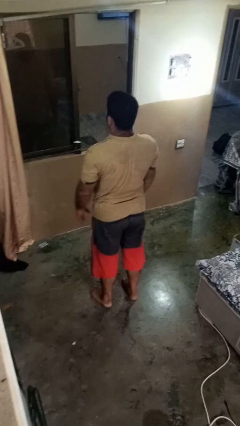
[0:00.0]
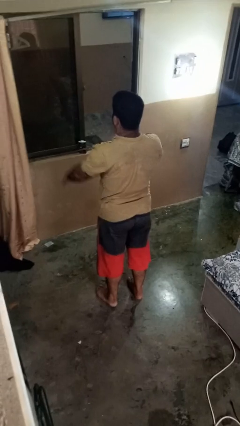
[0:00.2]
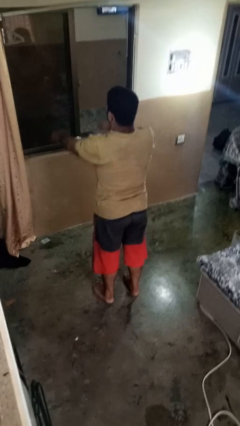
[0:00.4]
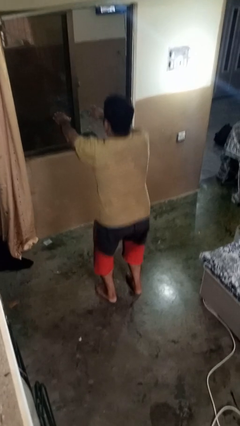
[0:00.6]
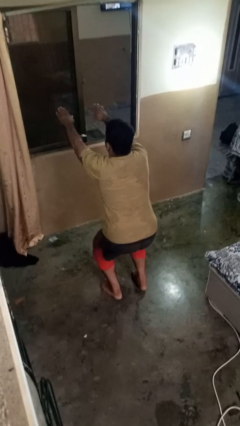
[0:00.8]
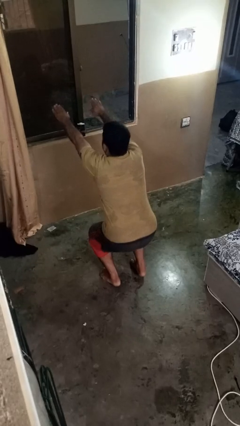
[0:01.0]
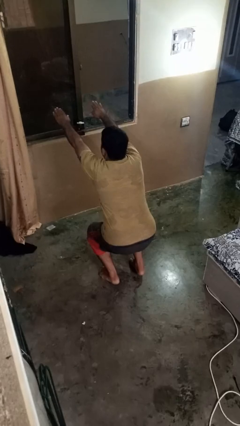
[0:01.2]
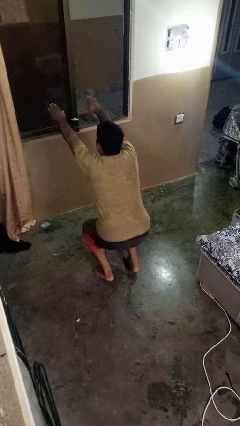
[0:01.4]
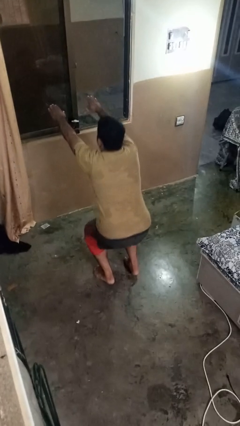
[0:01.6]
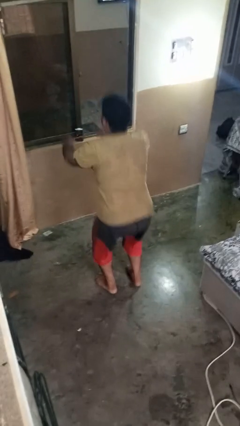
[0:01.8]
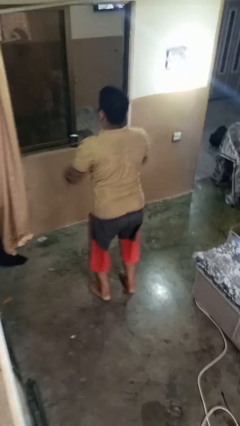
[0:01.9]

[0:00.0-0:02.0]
person squats

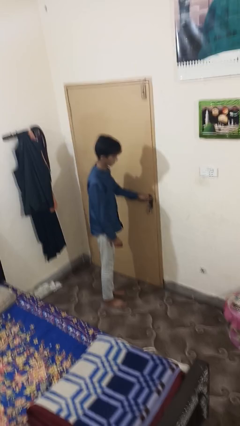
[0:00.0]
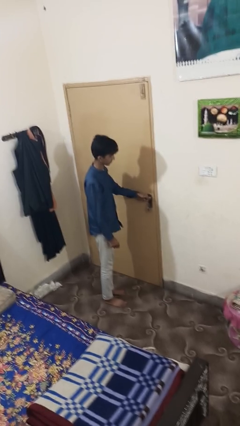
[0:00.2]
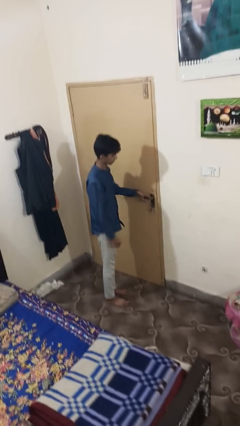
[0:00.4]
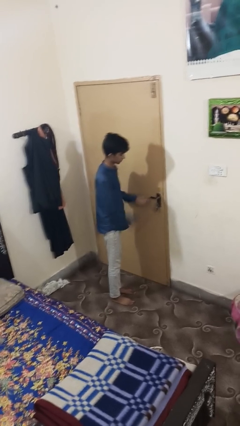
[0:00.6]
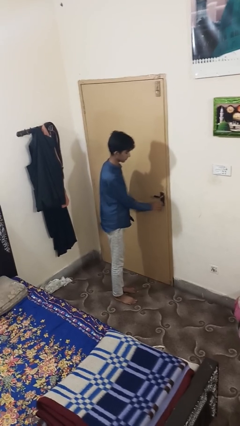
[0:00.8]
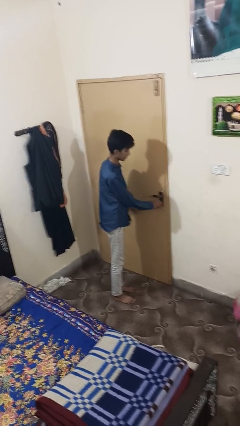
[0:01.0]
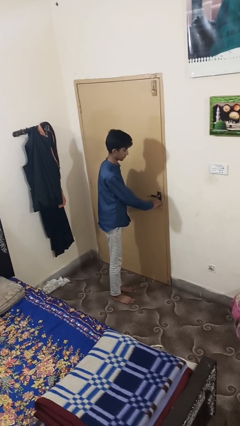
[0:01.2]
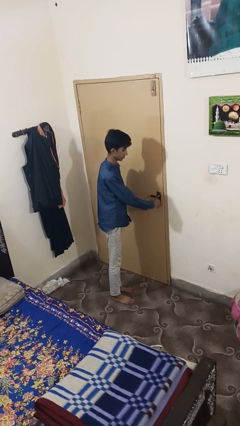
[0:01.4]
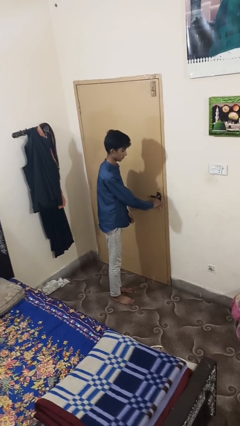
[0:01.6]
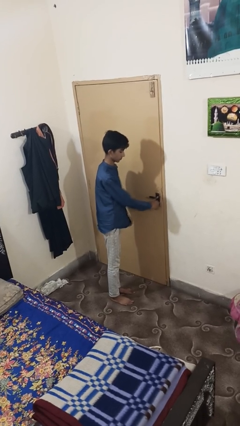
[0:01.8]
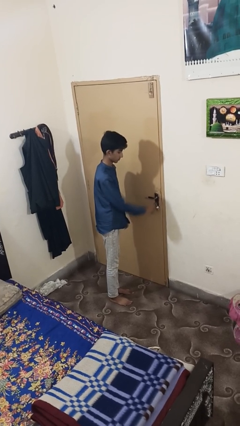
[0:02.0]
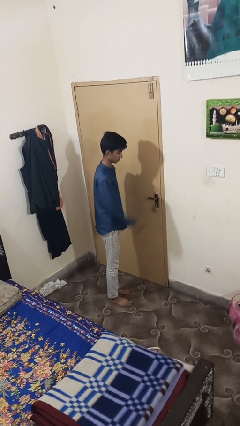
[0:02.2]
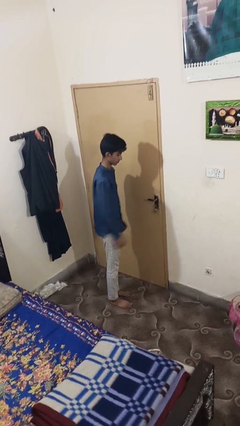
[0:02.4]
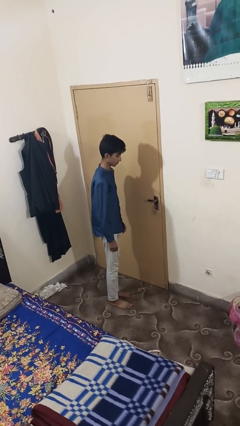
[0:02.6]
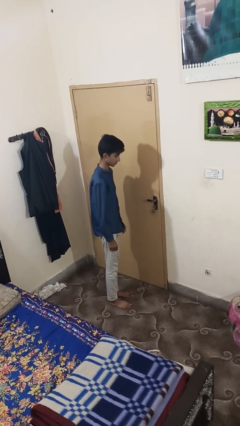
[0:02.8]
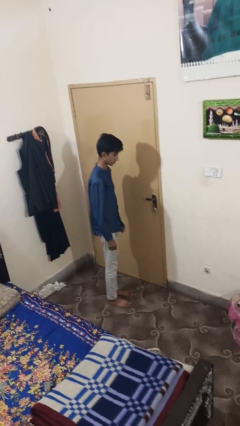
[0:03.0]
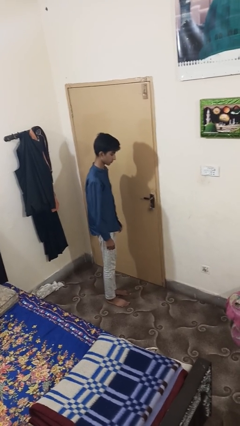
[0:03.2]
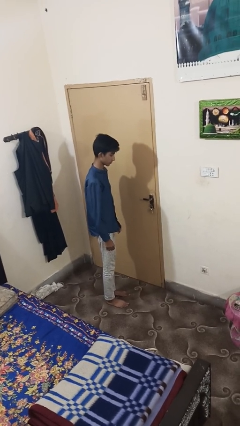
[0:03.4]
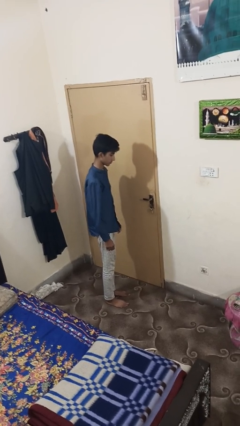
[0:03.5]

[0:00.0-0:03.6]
person locks door with keys

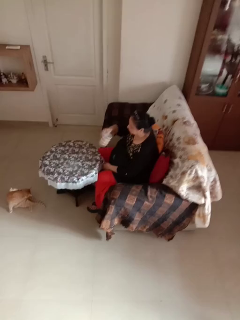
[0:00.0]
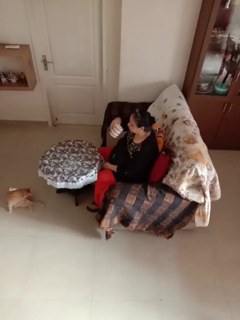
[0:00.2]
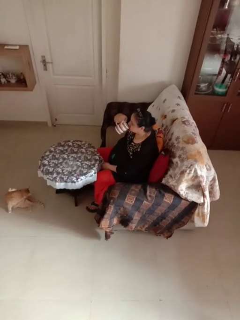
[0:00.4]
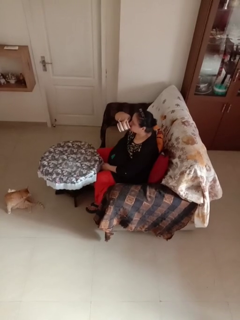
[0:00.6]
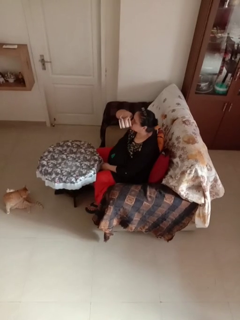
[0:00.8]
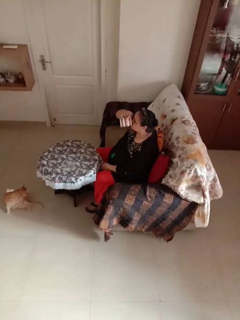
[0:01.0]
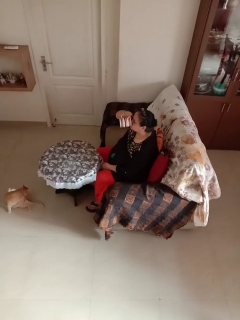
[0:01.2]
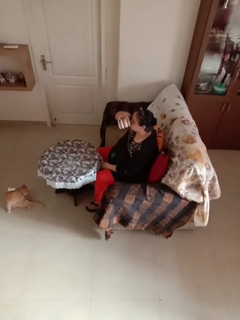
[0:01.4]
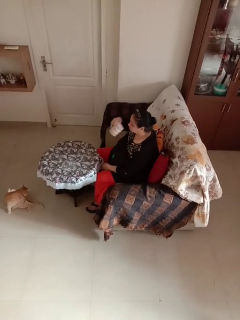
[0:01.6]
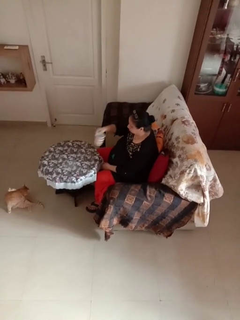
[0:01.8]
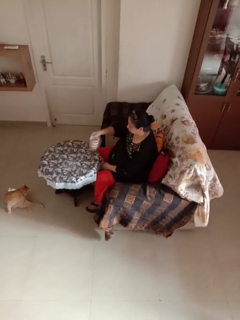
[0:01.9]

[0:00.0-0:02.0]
person drinks from mug

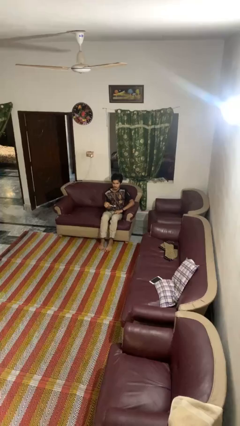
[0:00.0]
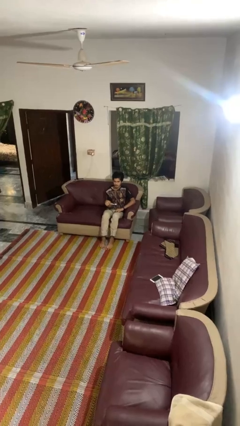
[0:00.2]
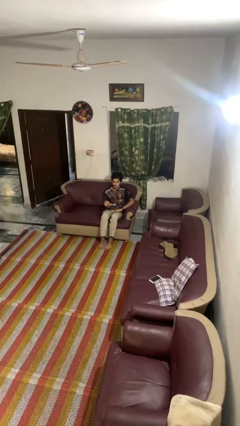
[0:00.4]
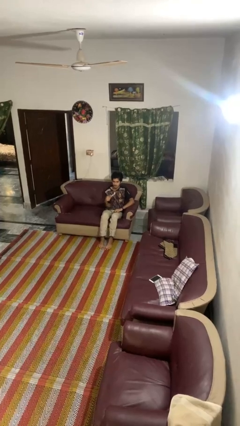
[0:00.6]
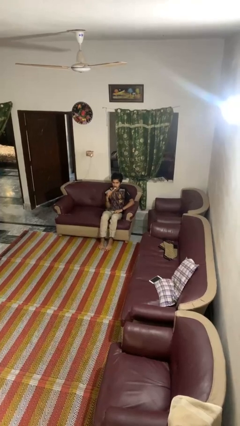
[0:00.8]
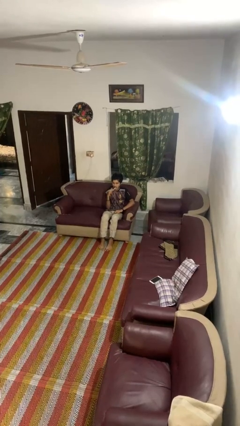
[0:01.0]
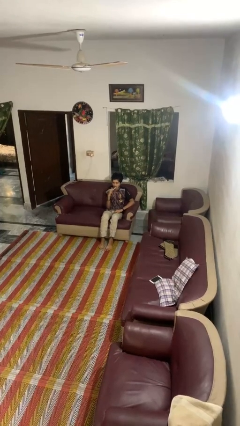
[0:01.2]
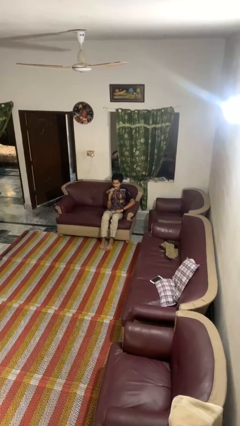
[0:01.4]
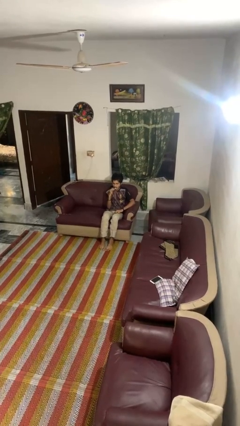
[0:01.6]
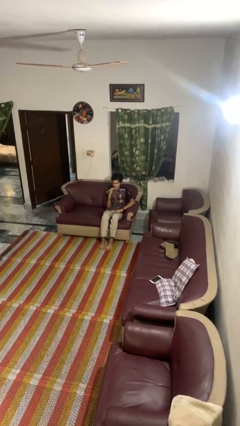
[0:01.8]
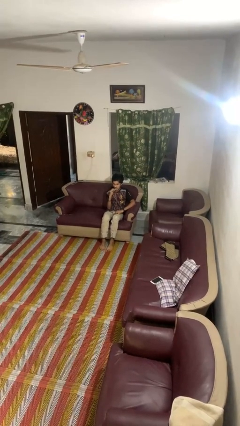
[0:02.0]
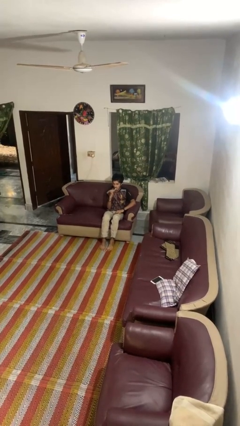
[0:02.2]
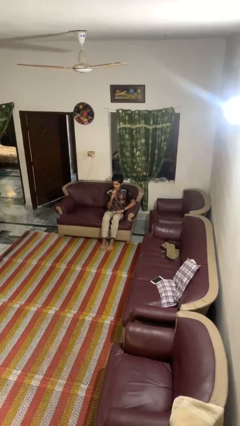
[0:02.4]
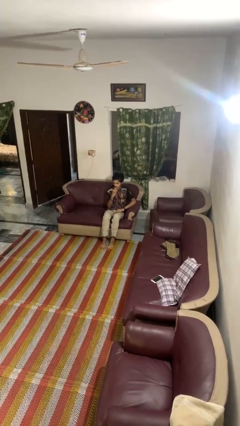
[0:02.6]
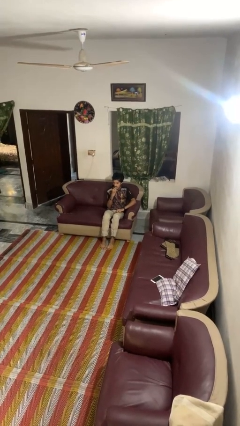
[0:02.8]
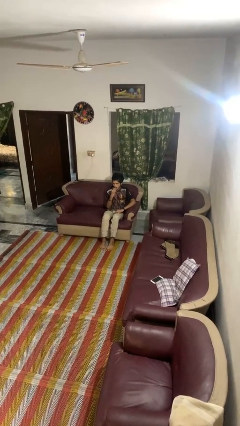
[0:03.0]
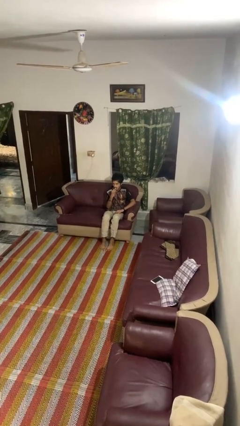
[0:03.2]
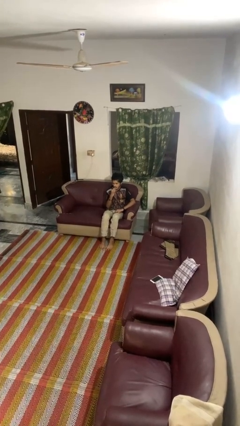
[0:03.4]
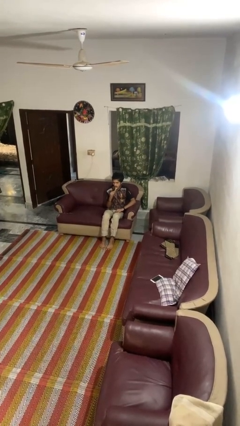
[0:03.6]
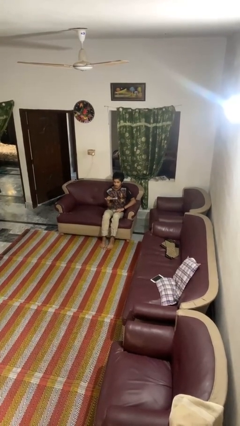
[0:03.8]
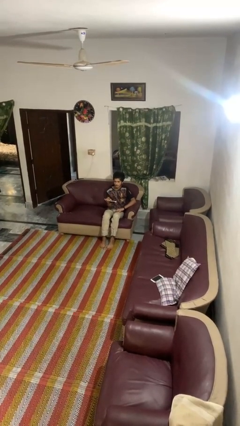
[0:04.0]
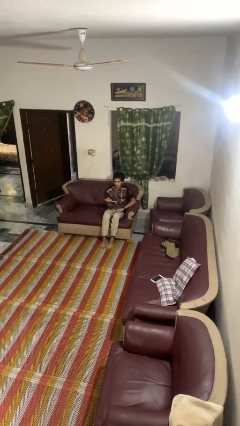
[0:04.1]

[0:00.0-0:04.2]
person brushes teeth

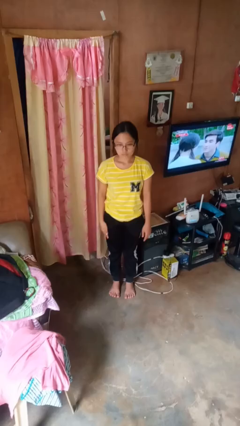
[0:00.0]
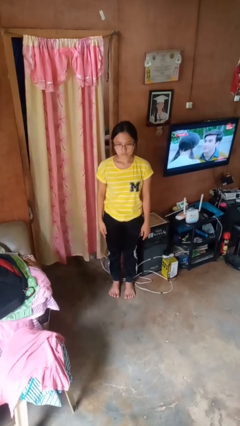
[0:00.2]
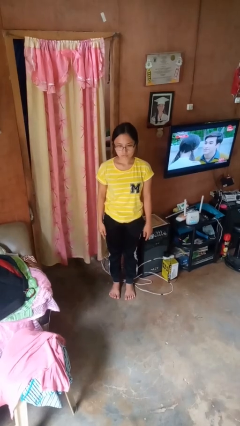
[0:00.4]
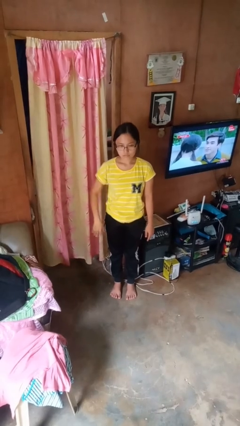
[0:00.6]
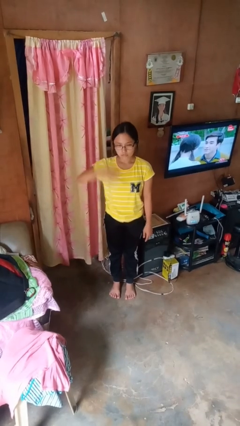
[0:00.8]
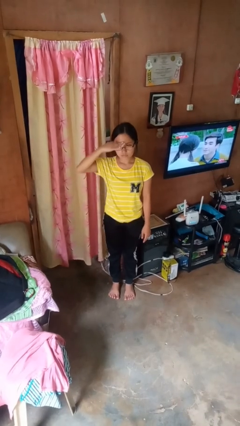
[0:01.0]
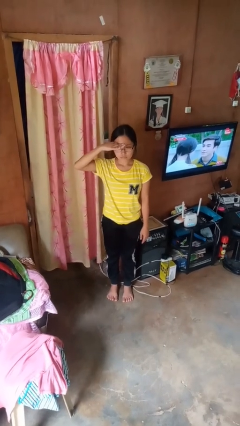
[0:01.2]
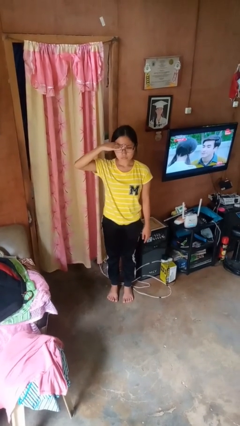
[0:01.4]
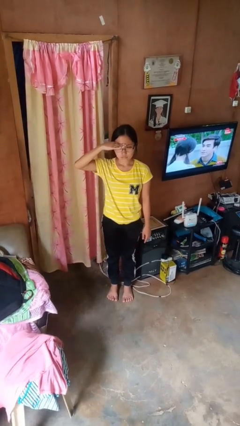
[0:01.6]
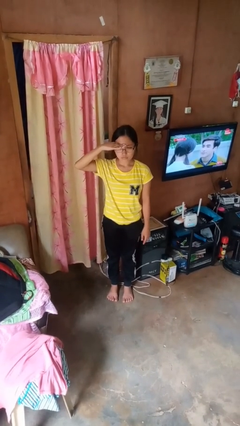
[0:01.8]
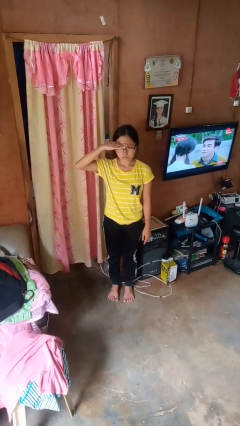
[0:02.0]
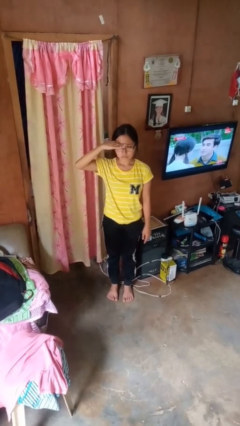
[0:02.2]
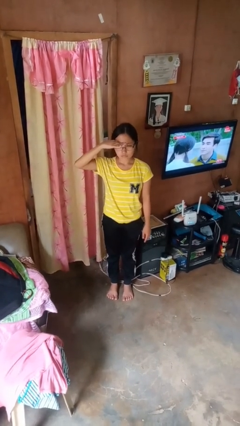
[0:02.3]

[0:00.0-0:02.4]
person salutes

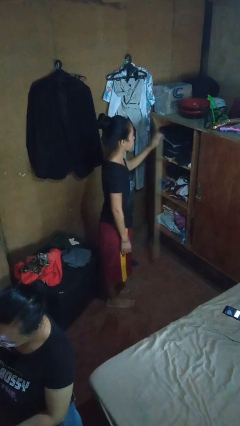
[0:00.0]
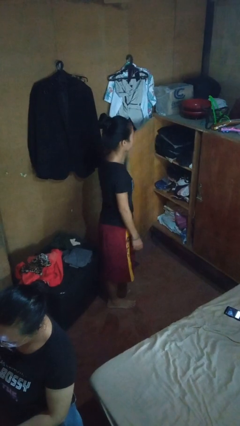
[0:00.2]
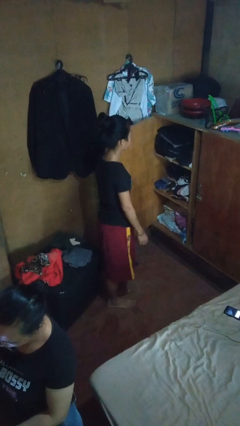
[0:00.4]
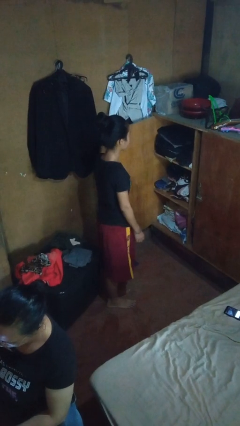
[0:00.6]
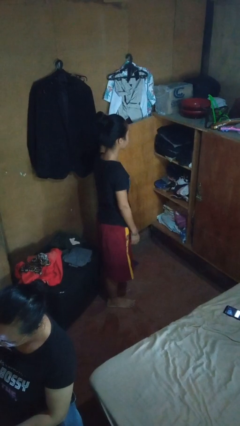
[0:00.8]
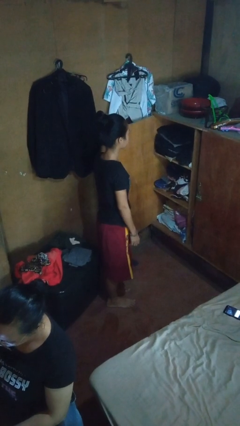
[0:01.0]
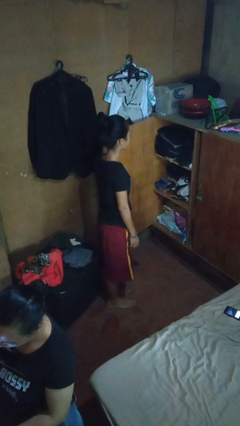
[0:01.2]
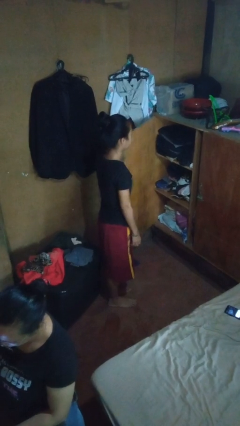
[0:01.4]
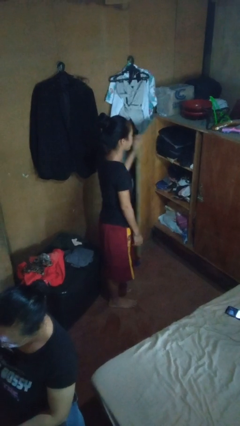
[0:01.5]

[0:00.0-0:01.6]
person opens closet door

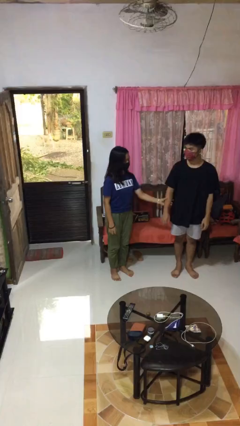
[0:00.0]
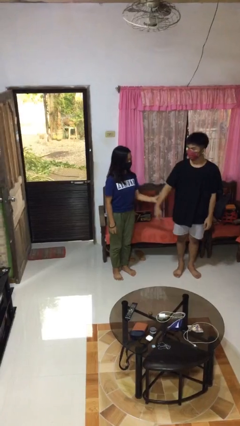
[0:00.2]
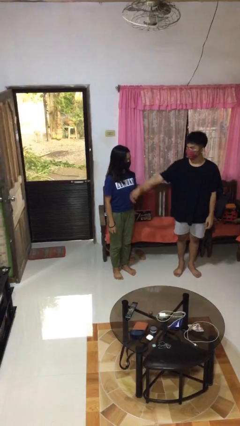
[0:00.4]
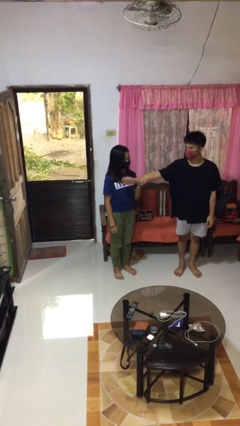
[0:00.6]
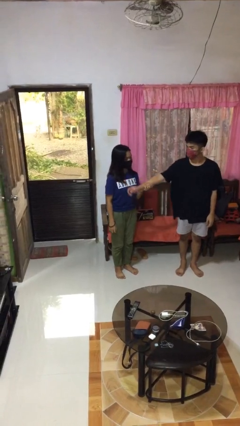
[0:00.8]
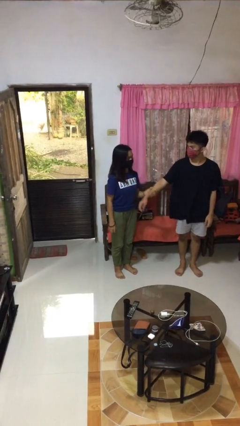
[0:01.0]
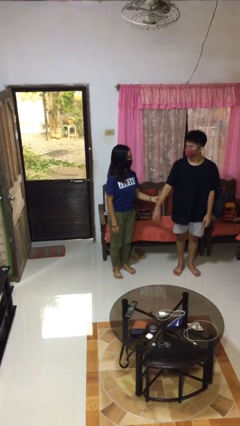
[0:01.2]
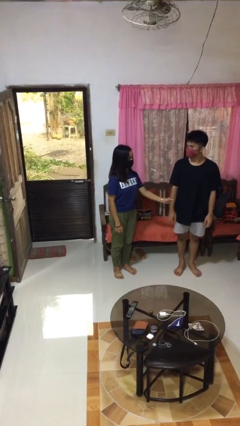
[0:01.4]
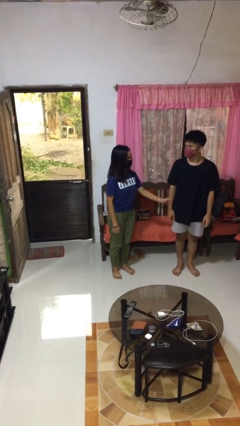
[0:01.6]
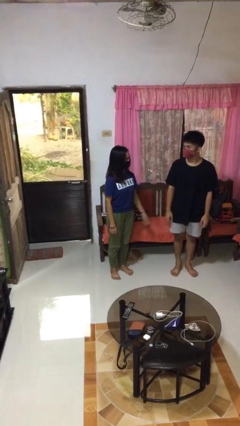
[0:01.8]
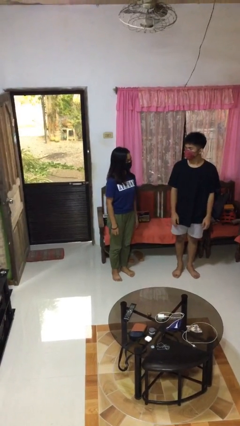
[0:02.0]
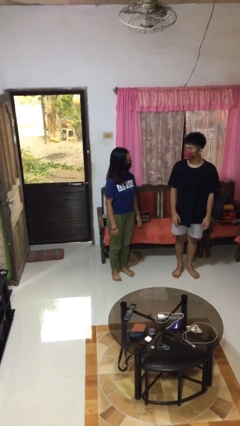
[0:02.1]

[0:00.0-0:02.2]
person grabs person by forearm

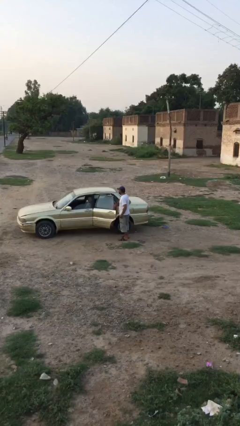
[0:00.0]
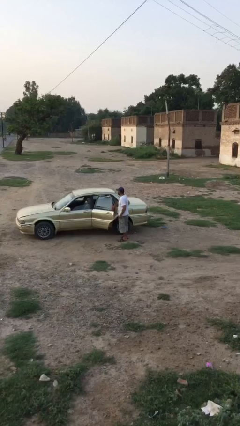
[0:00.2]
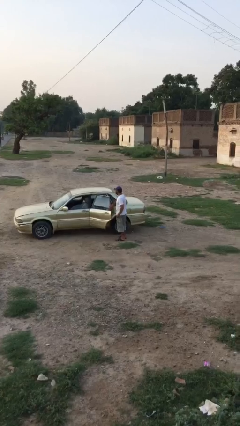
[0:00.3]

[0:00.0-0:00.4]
person enters car
